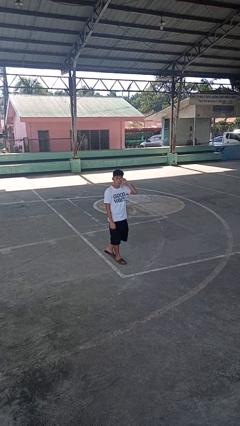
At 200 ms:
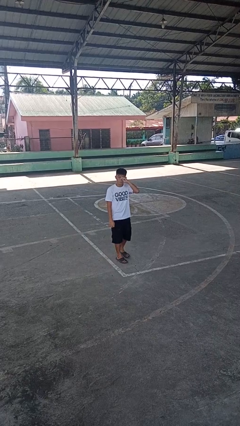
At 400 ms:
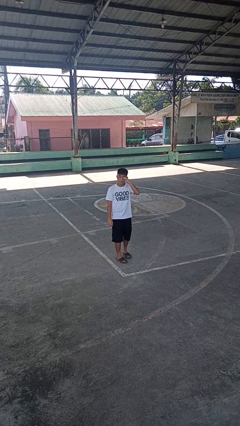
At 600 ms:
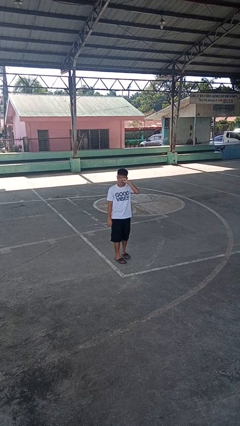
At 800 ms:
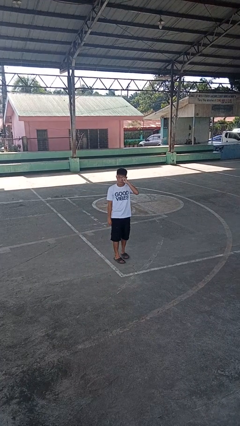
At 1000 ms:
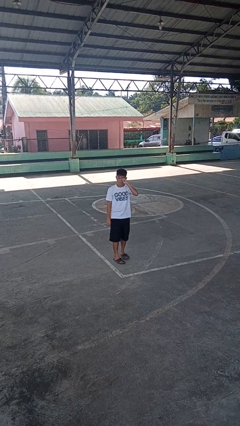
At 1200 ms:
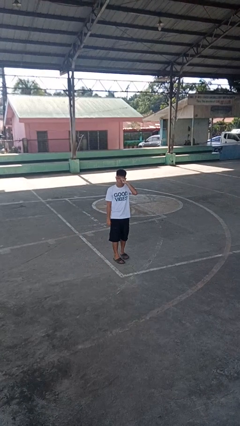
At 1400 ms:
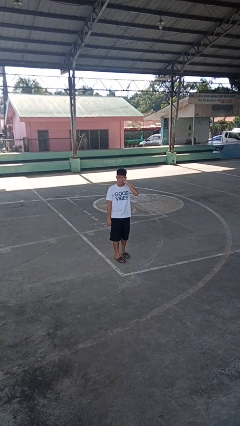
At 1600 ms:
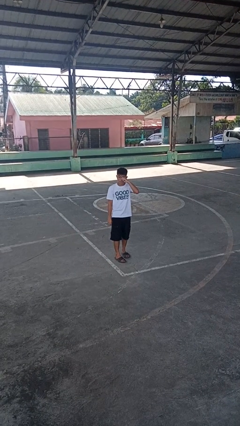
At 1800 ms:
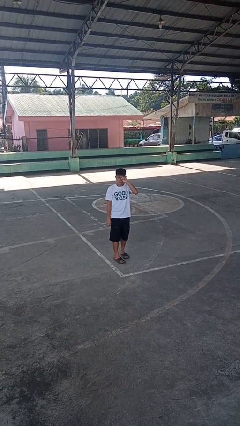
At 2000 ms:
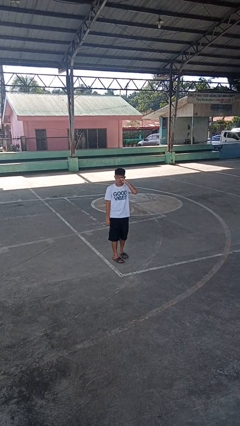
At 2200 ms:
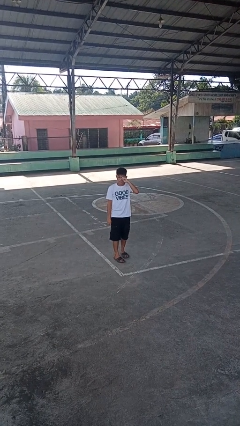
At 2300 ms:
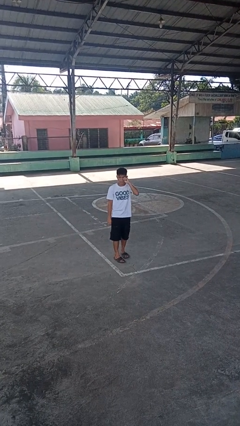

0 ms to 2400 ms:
person rubs eyes

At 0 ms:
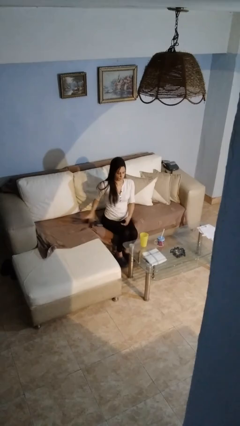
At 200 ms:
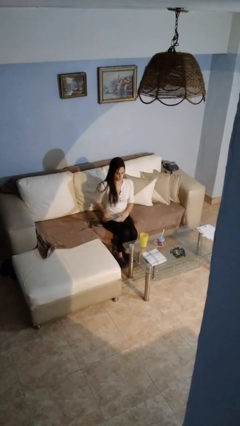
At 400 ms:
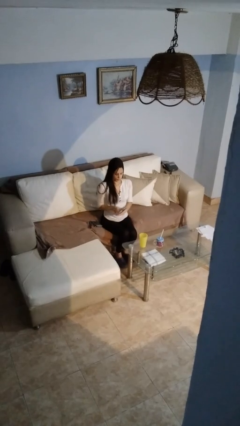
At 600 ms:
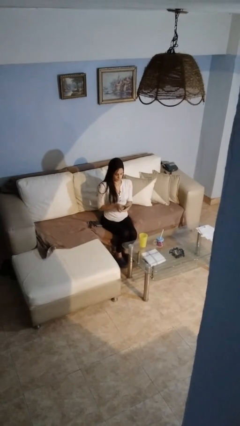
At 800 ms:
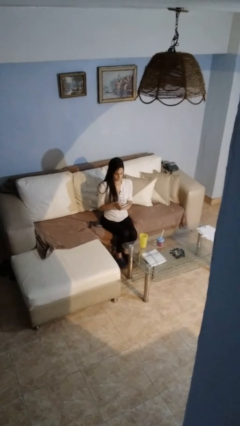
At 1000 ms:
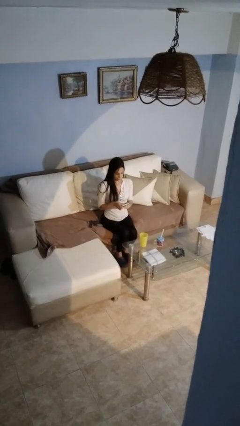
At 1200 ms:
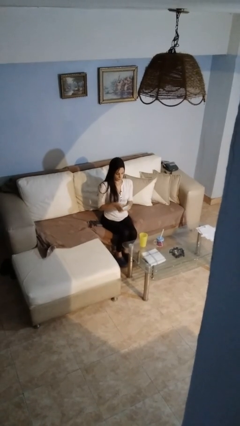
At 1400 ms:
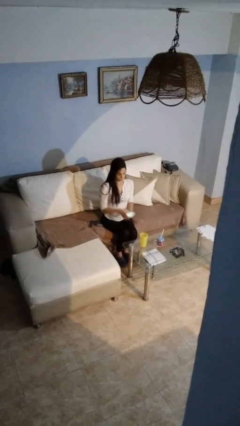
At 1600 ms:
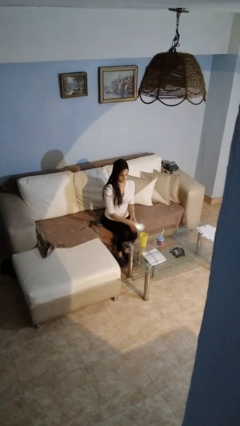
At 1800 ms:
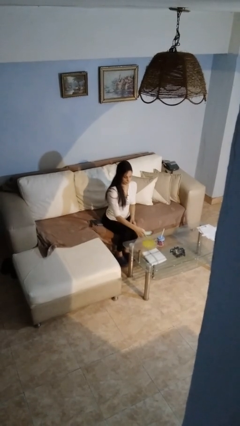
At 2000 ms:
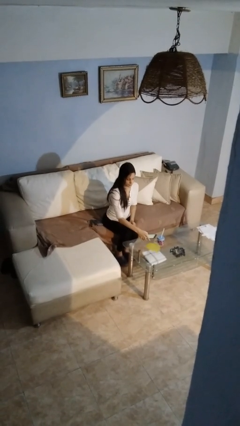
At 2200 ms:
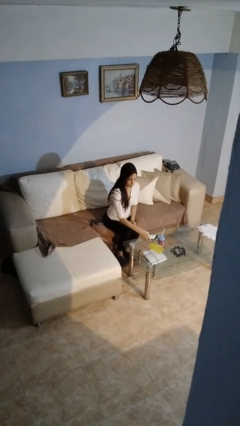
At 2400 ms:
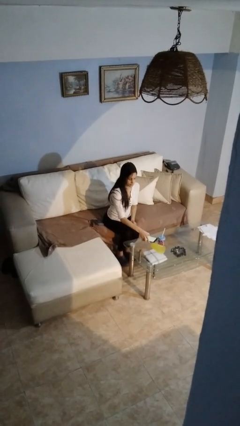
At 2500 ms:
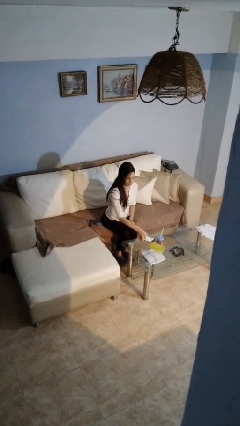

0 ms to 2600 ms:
person knocks over glass

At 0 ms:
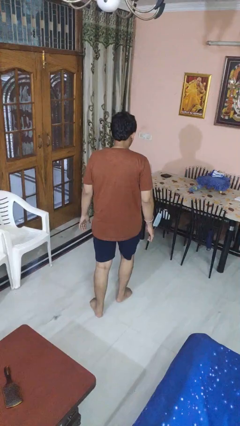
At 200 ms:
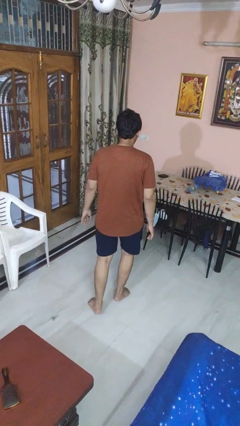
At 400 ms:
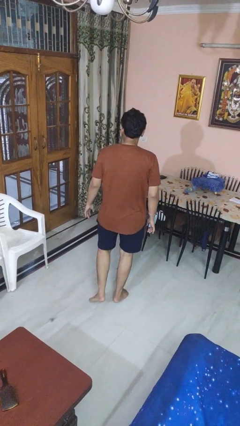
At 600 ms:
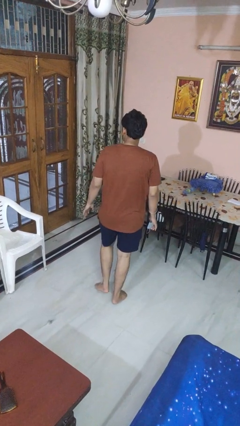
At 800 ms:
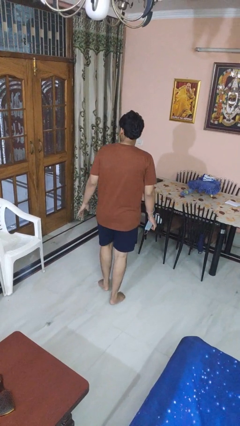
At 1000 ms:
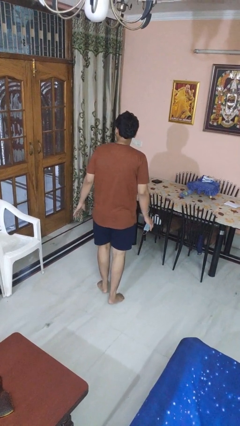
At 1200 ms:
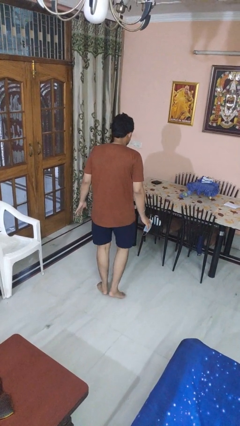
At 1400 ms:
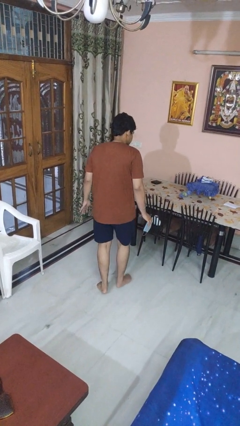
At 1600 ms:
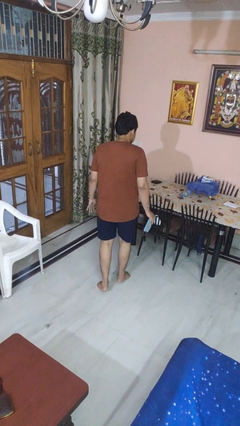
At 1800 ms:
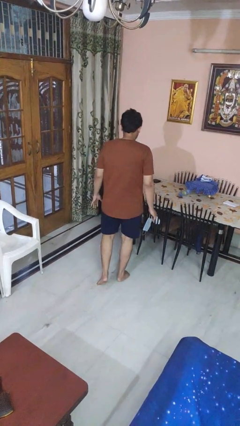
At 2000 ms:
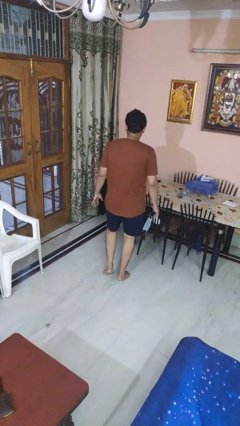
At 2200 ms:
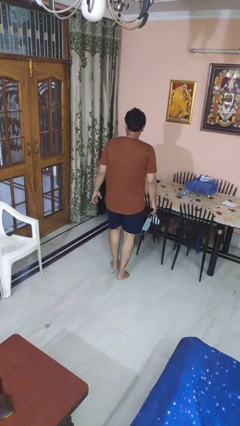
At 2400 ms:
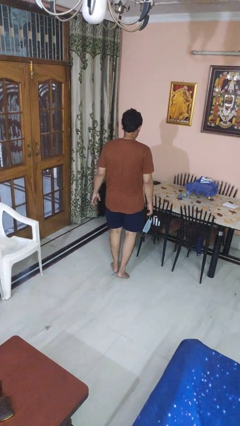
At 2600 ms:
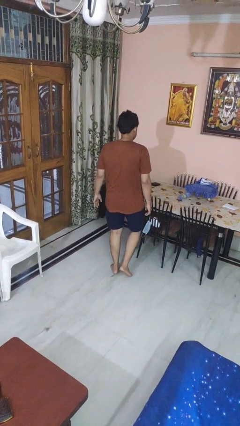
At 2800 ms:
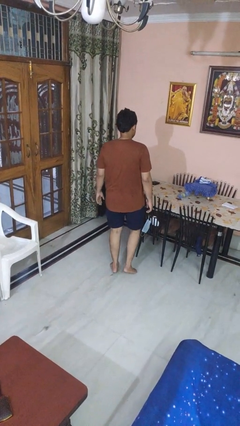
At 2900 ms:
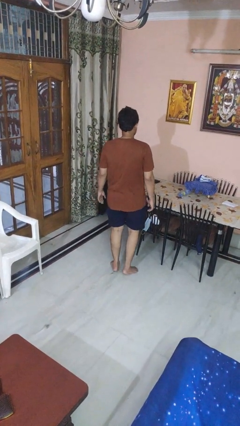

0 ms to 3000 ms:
person walks tiptoe

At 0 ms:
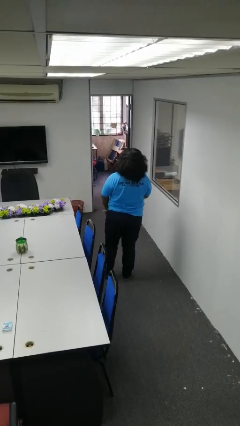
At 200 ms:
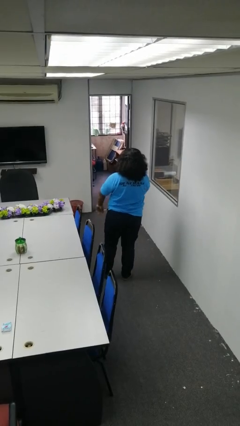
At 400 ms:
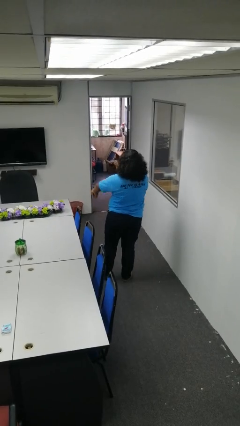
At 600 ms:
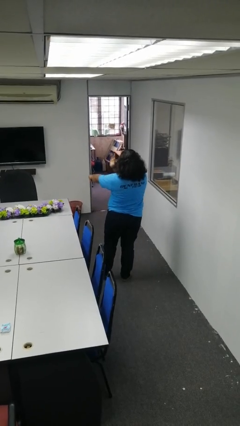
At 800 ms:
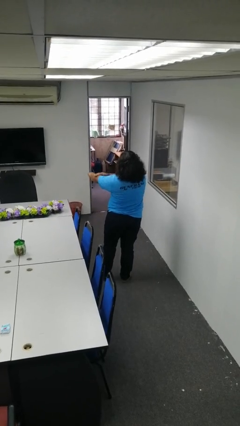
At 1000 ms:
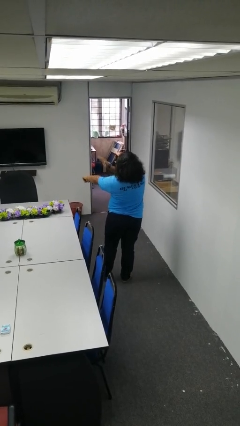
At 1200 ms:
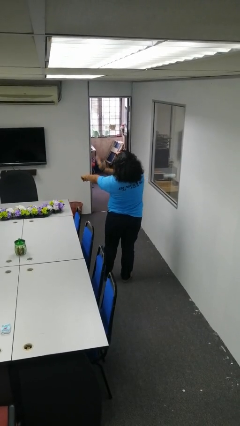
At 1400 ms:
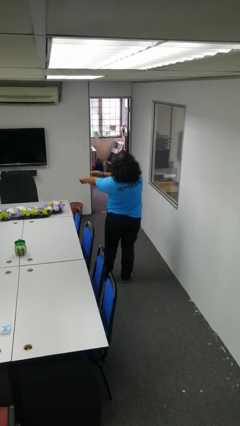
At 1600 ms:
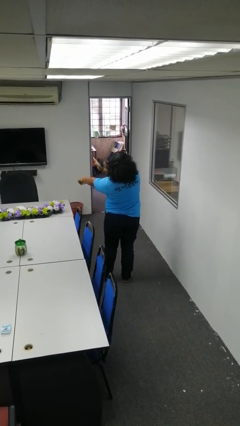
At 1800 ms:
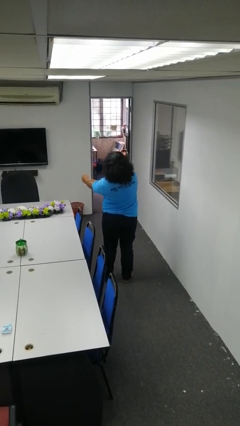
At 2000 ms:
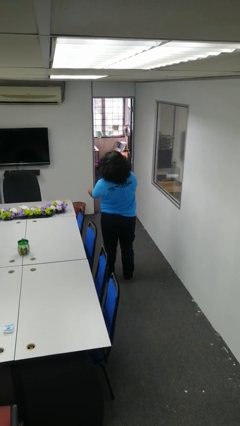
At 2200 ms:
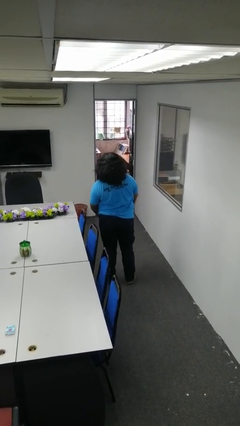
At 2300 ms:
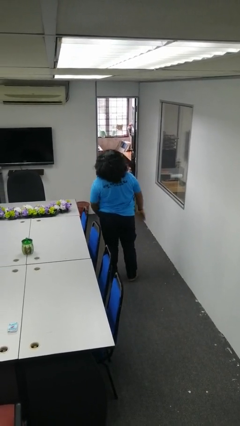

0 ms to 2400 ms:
person swats bug

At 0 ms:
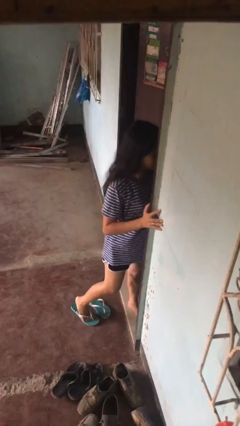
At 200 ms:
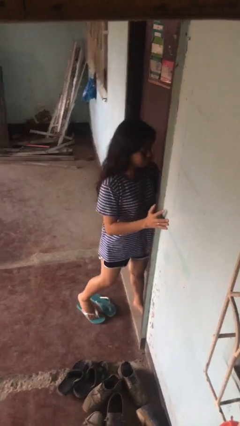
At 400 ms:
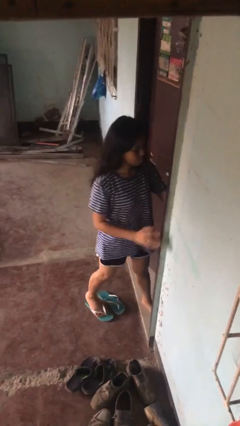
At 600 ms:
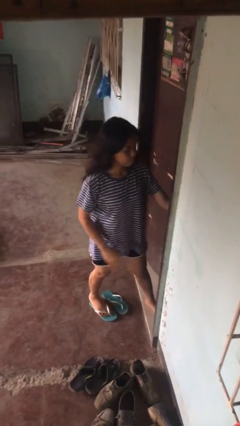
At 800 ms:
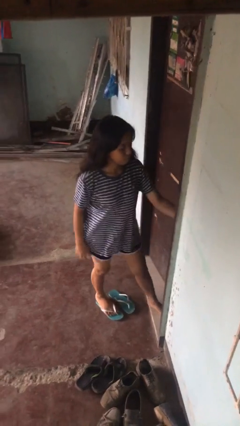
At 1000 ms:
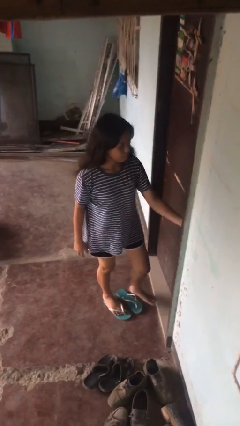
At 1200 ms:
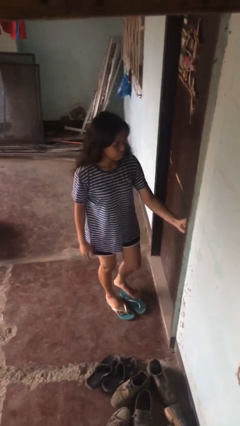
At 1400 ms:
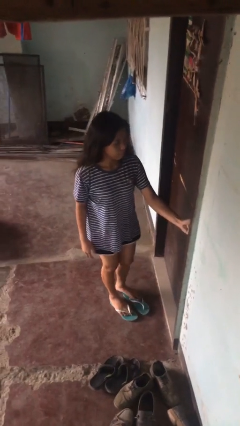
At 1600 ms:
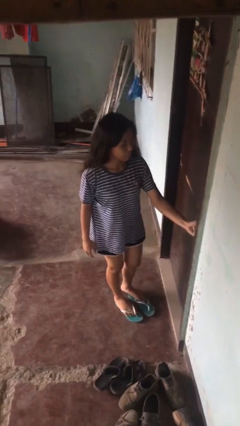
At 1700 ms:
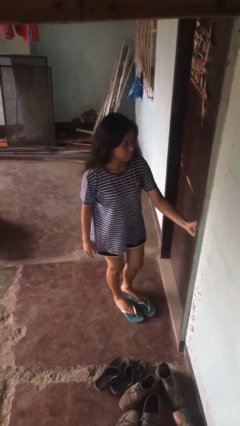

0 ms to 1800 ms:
person closes facility door

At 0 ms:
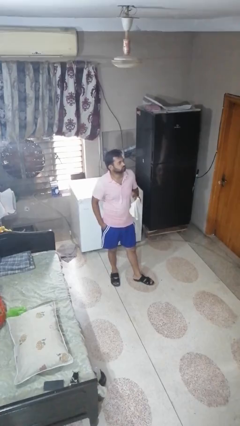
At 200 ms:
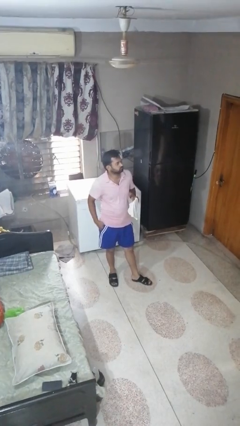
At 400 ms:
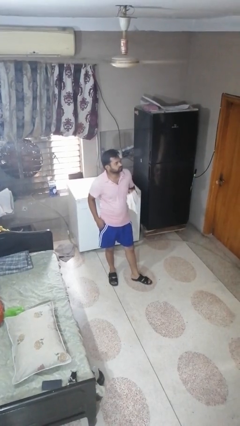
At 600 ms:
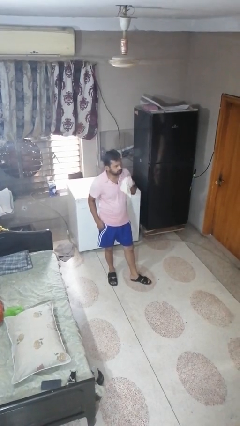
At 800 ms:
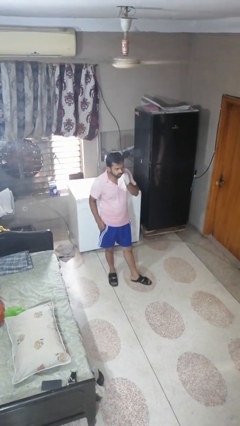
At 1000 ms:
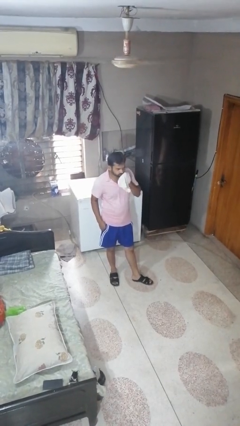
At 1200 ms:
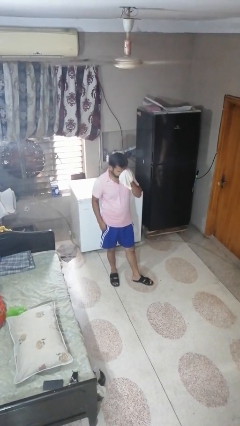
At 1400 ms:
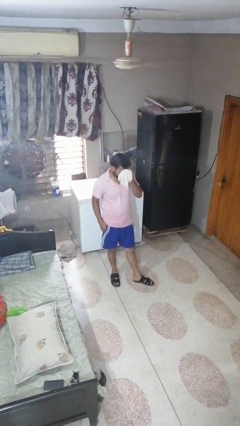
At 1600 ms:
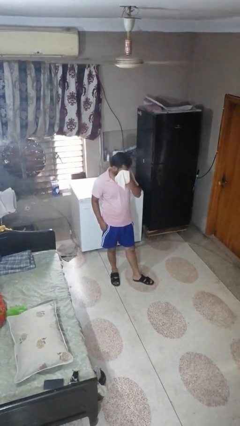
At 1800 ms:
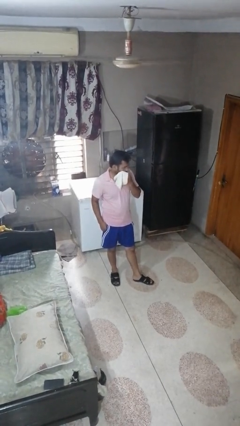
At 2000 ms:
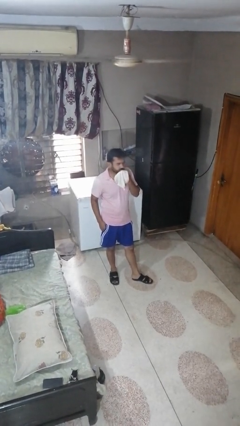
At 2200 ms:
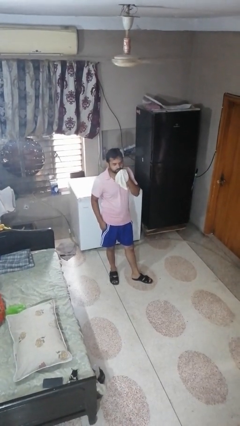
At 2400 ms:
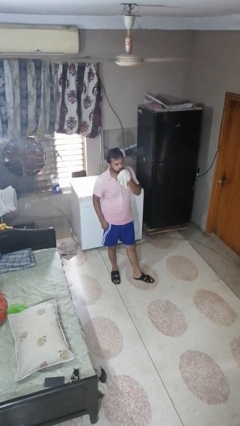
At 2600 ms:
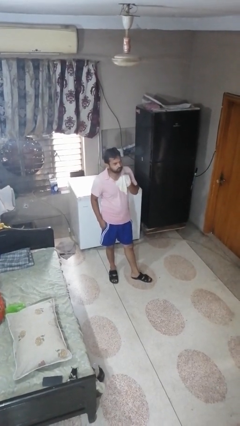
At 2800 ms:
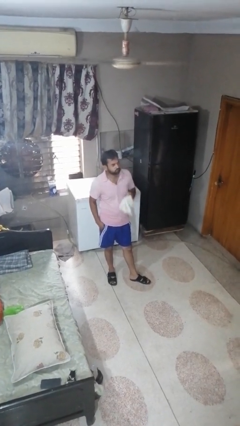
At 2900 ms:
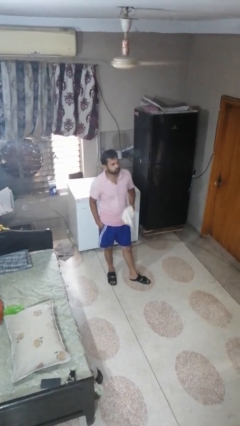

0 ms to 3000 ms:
person wipes mouth with napkin

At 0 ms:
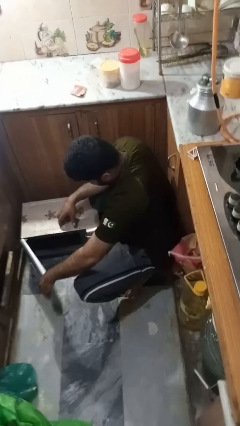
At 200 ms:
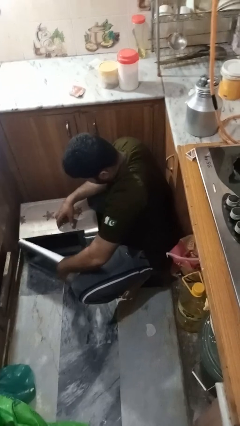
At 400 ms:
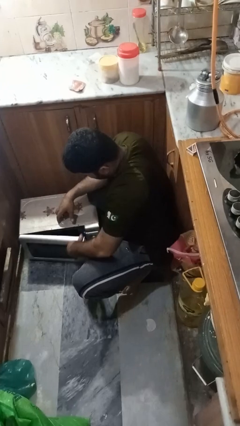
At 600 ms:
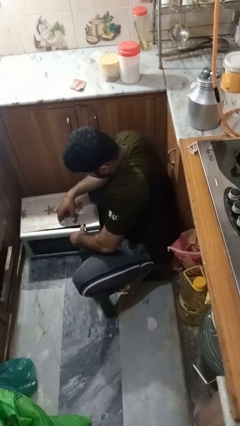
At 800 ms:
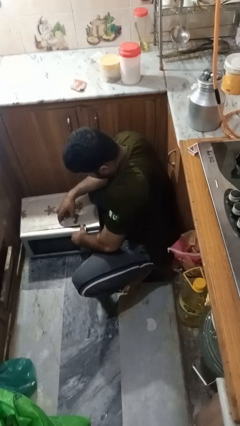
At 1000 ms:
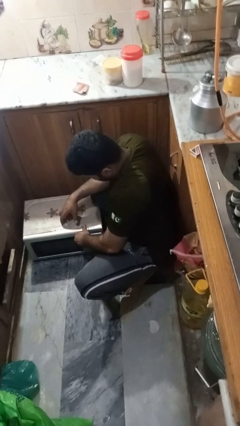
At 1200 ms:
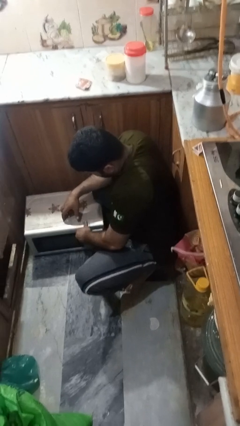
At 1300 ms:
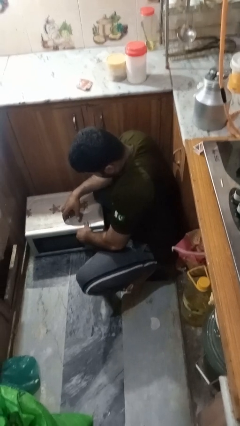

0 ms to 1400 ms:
person closes oven door

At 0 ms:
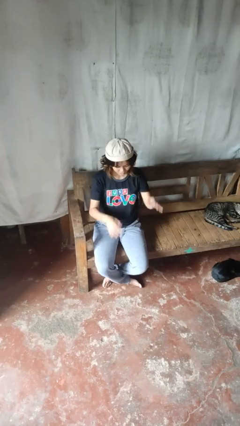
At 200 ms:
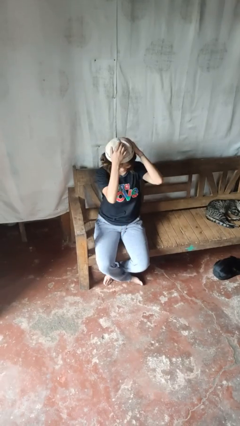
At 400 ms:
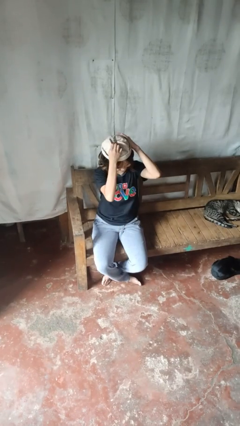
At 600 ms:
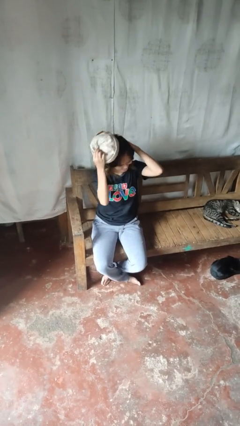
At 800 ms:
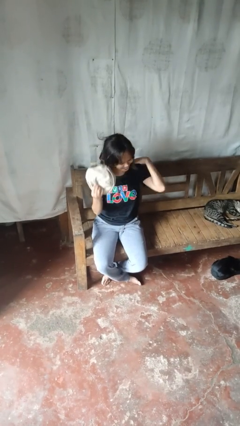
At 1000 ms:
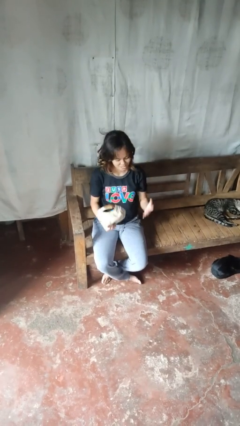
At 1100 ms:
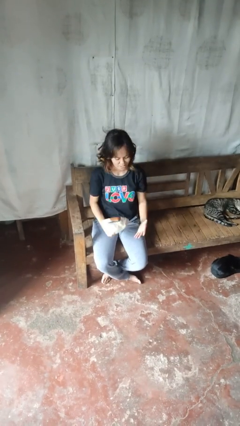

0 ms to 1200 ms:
person takes off hat
